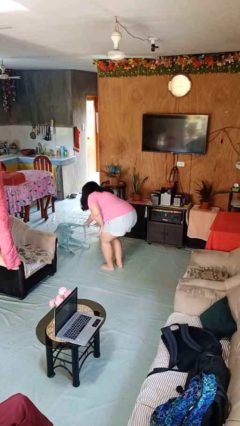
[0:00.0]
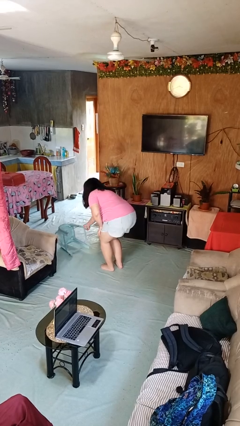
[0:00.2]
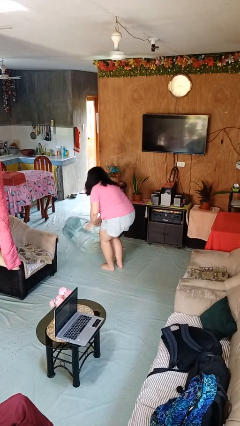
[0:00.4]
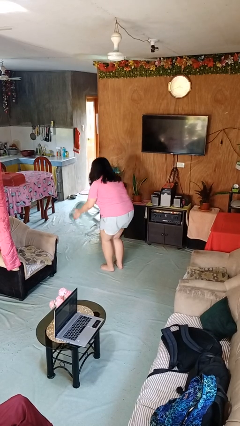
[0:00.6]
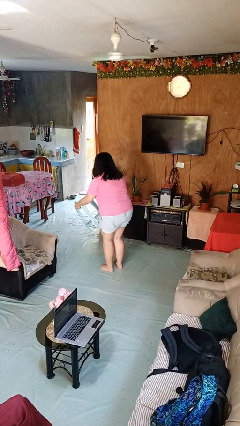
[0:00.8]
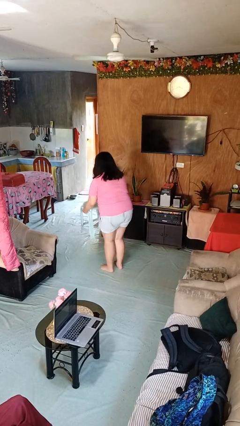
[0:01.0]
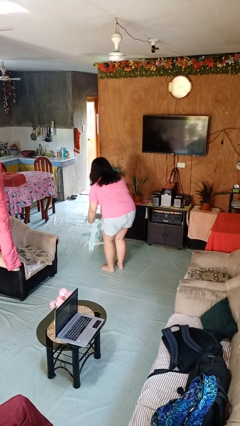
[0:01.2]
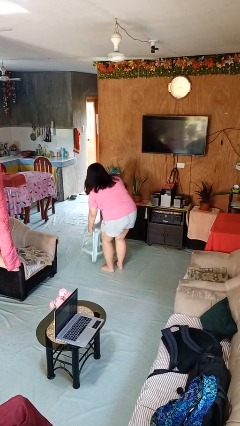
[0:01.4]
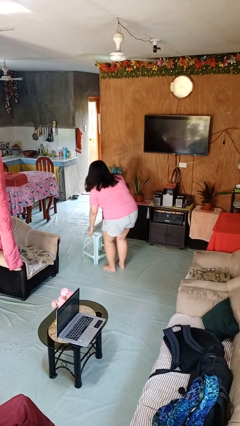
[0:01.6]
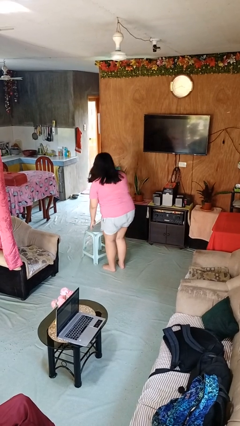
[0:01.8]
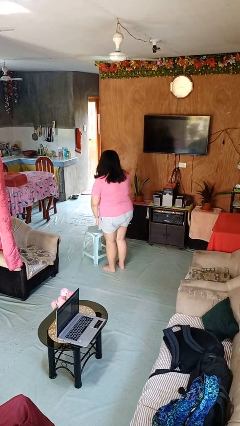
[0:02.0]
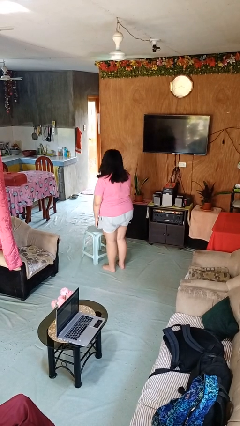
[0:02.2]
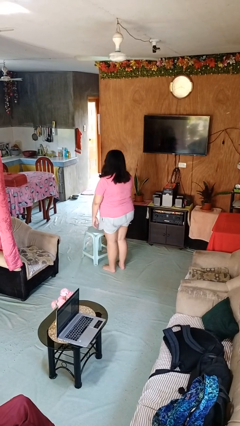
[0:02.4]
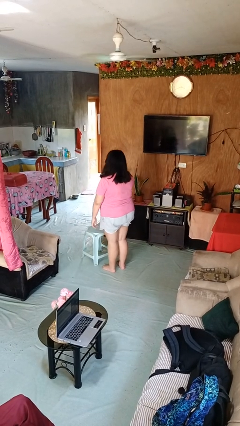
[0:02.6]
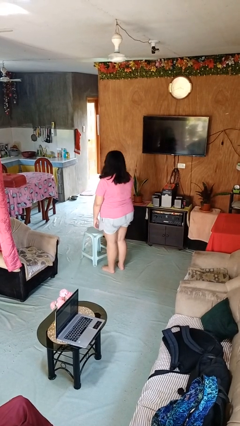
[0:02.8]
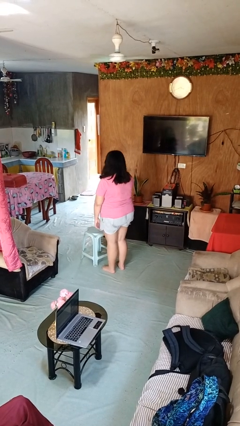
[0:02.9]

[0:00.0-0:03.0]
person sets upright furniture

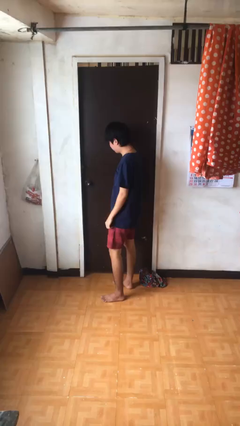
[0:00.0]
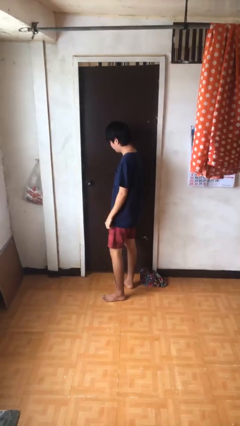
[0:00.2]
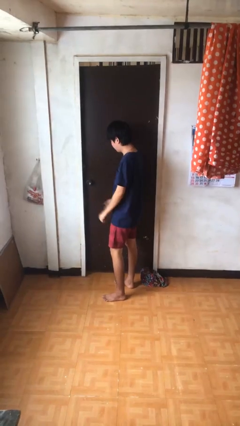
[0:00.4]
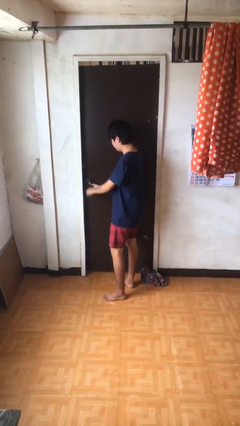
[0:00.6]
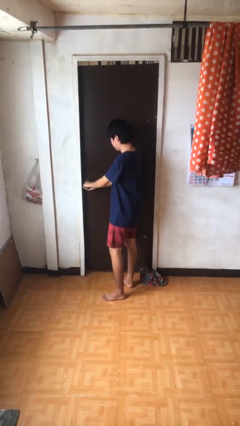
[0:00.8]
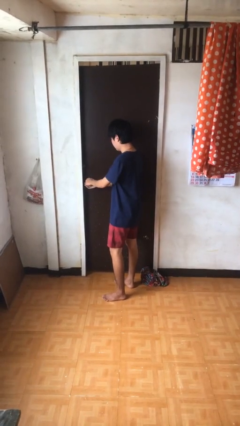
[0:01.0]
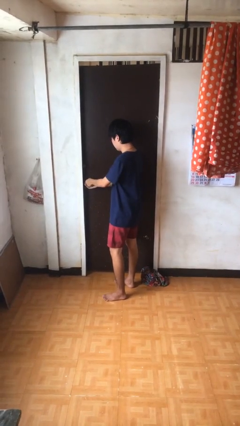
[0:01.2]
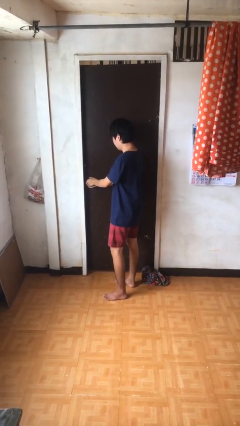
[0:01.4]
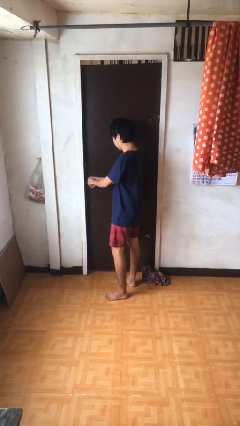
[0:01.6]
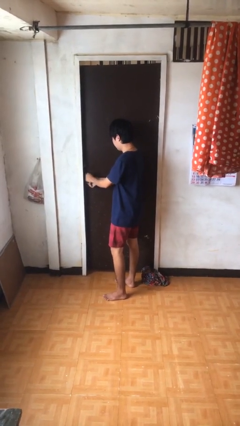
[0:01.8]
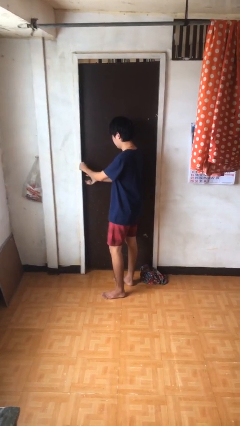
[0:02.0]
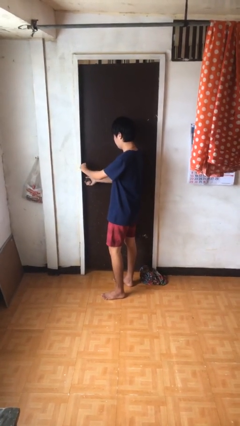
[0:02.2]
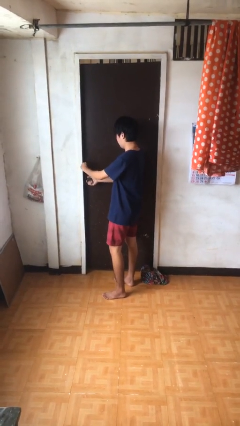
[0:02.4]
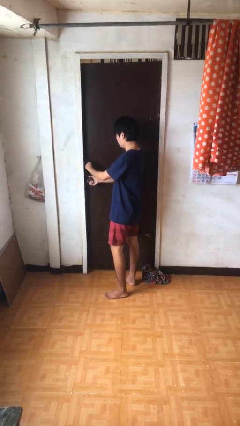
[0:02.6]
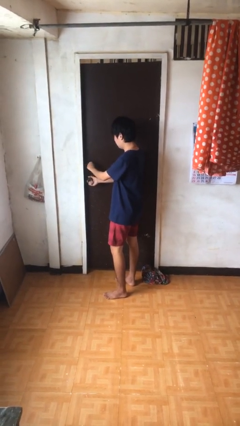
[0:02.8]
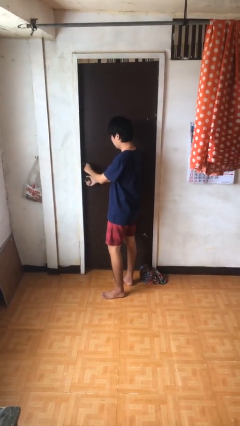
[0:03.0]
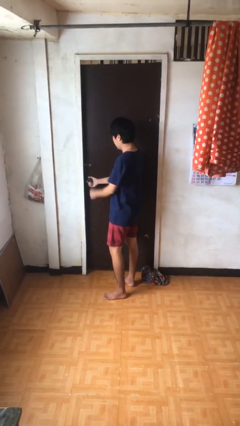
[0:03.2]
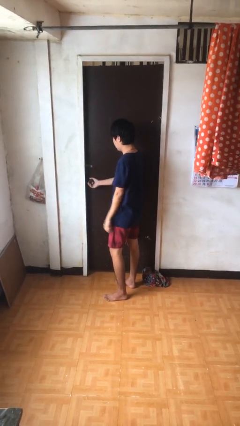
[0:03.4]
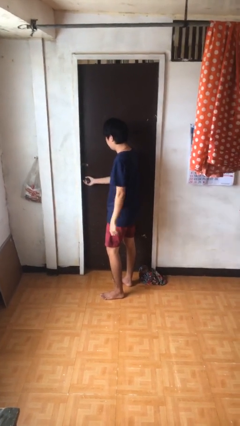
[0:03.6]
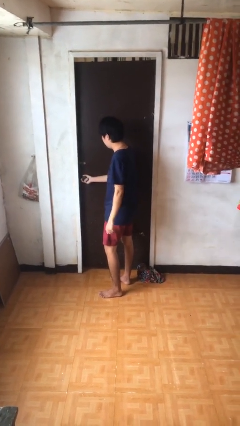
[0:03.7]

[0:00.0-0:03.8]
person unlocks door with keys

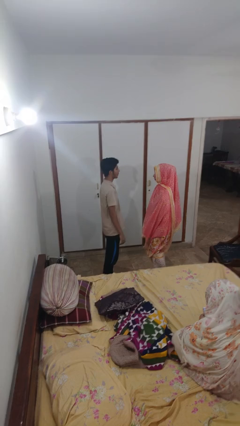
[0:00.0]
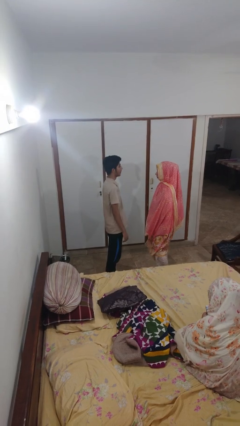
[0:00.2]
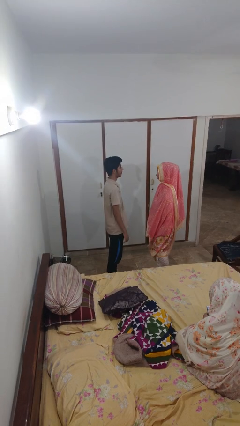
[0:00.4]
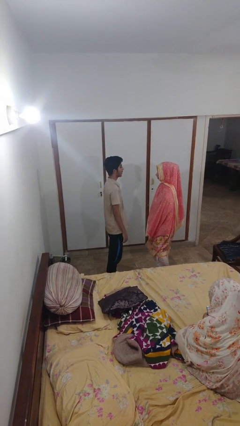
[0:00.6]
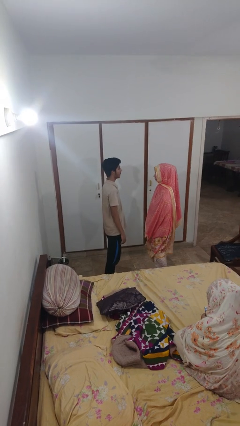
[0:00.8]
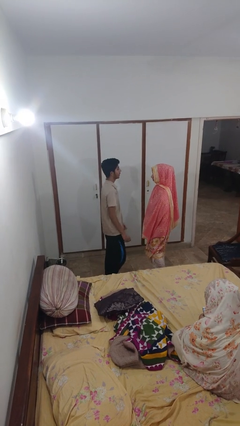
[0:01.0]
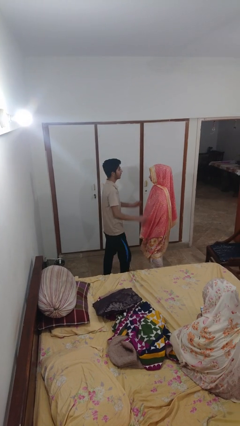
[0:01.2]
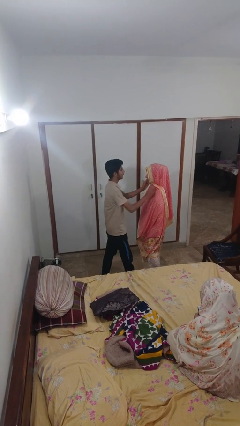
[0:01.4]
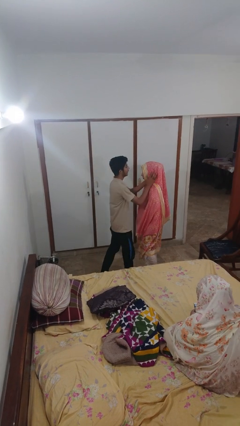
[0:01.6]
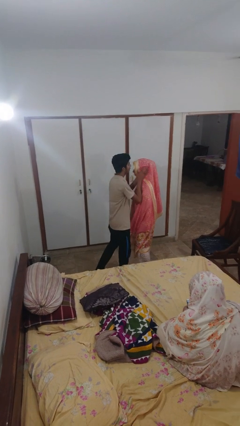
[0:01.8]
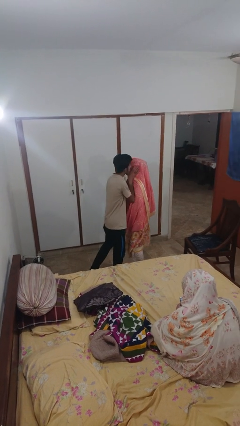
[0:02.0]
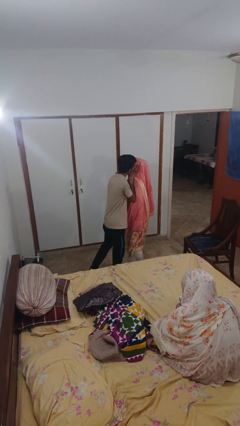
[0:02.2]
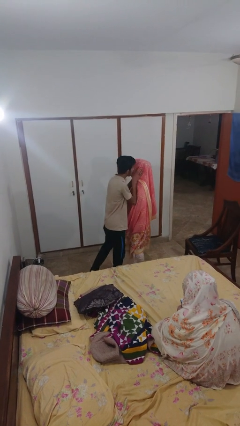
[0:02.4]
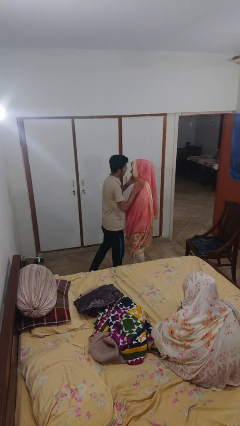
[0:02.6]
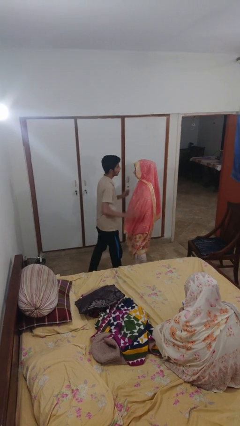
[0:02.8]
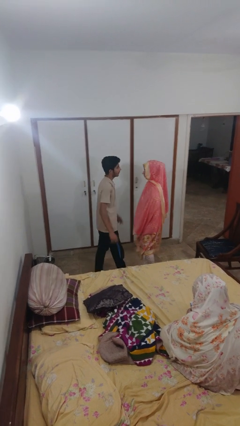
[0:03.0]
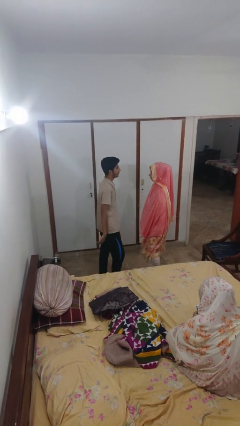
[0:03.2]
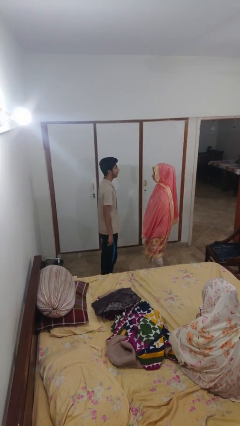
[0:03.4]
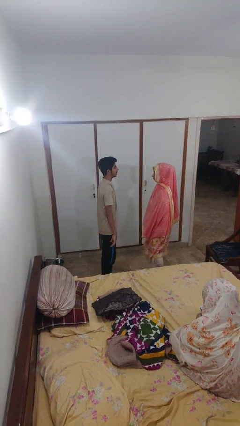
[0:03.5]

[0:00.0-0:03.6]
person kisses cheek of person

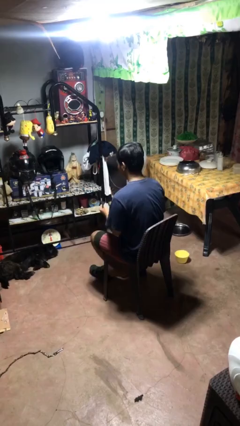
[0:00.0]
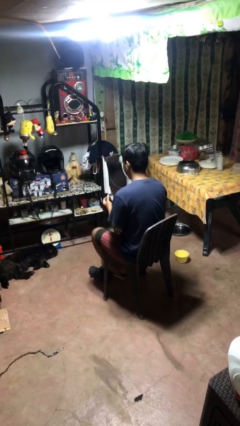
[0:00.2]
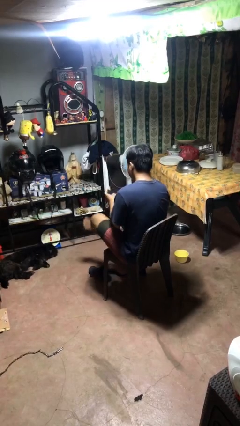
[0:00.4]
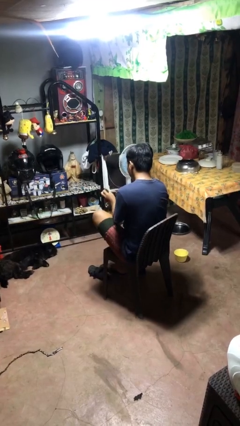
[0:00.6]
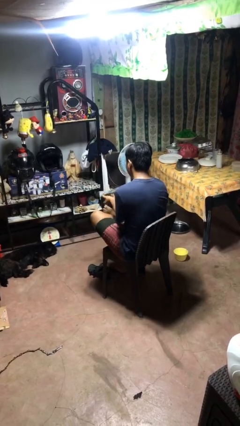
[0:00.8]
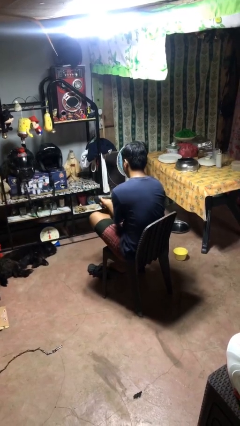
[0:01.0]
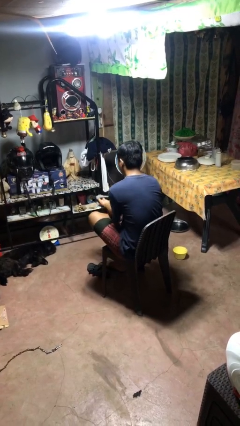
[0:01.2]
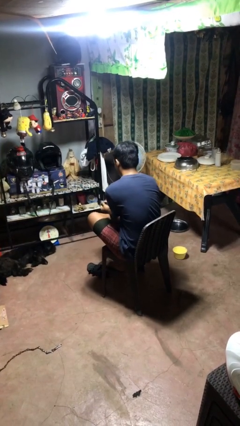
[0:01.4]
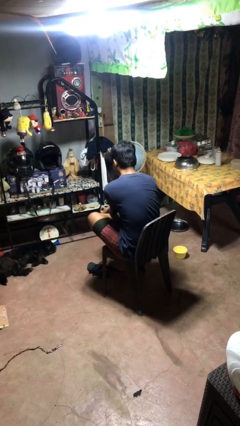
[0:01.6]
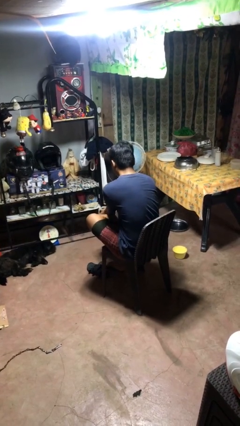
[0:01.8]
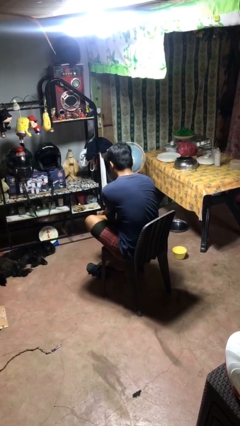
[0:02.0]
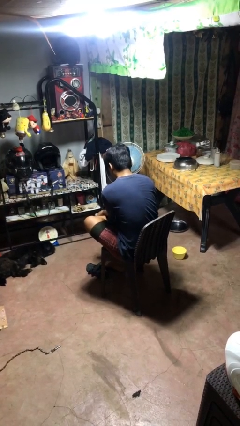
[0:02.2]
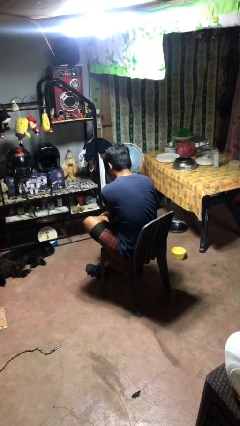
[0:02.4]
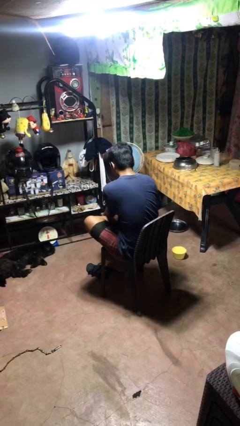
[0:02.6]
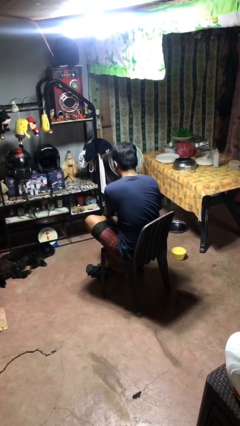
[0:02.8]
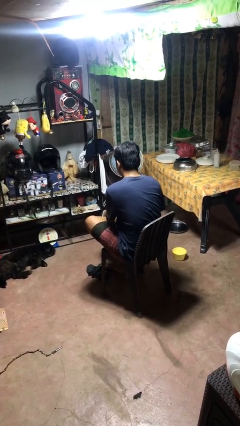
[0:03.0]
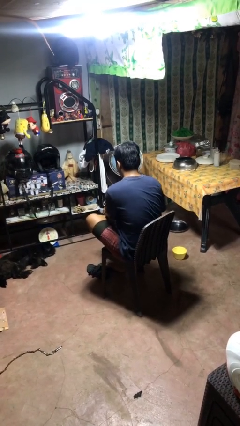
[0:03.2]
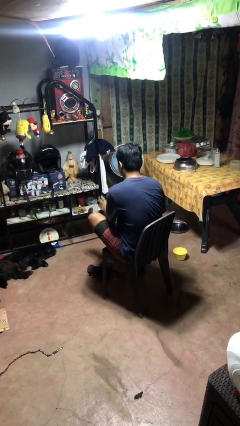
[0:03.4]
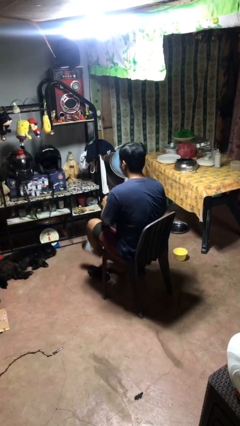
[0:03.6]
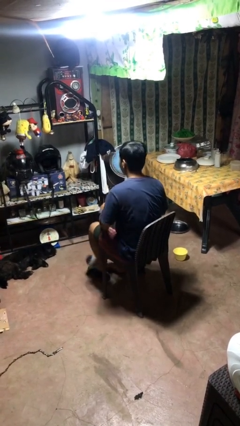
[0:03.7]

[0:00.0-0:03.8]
person puts on socks

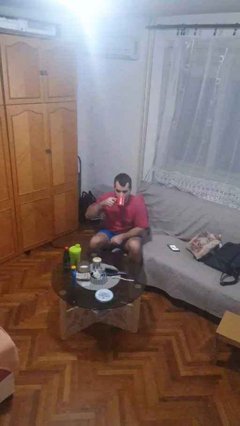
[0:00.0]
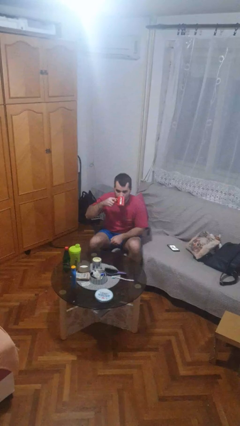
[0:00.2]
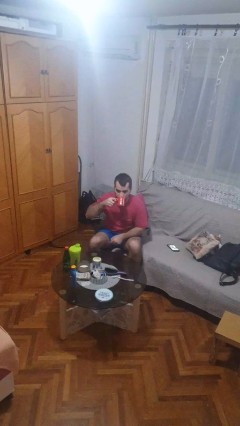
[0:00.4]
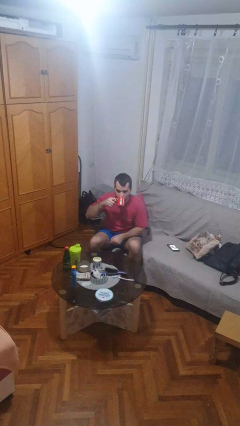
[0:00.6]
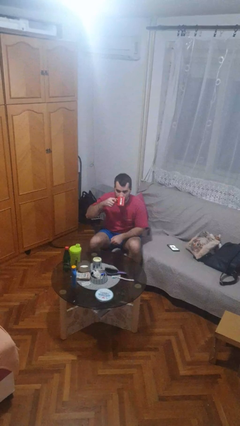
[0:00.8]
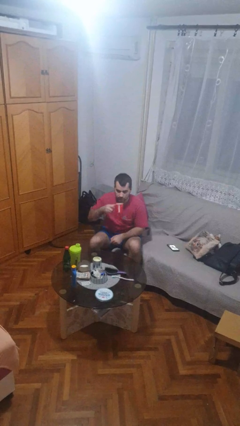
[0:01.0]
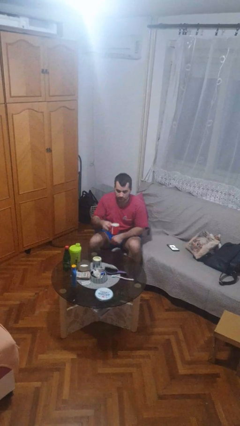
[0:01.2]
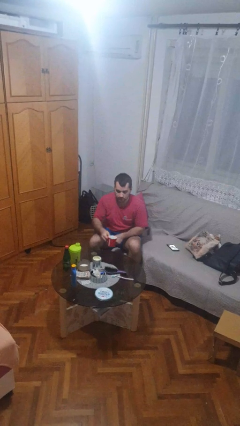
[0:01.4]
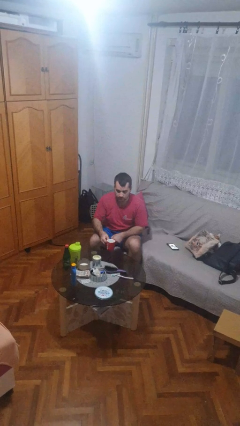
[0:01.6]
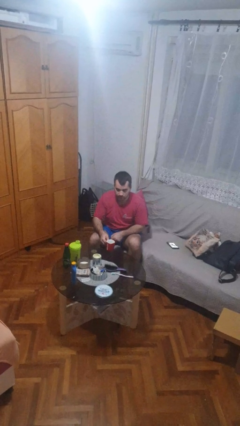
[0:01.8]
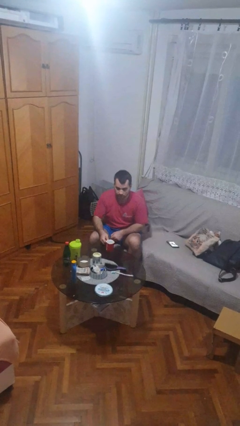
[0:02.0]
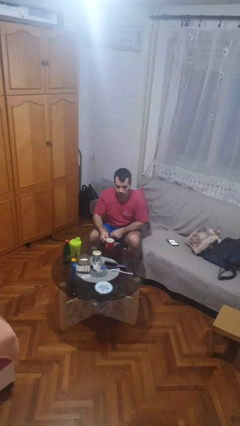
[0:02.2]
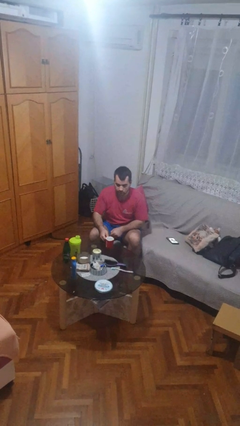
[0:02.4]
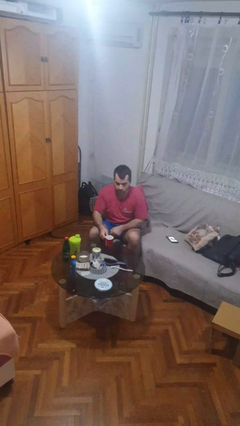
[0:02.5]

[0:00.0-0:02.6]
person puts down object on table

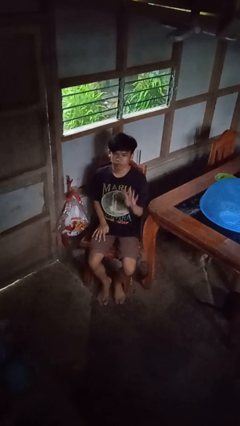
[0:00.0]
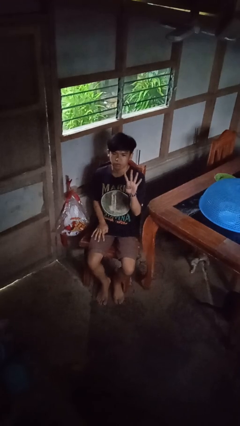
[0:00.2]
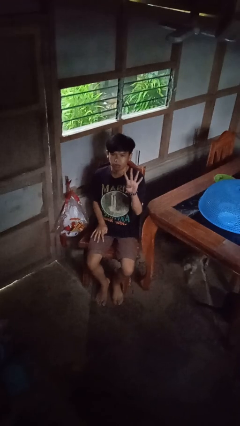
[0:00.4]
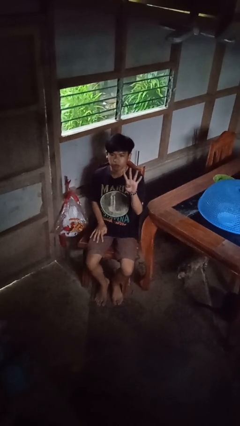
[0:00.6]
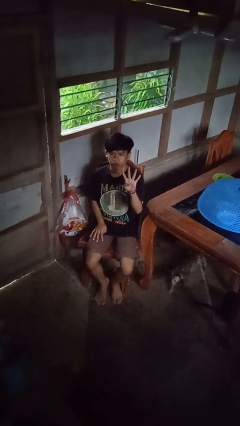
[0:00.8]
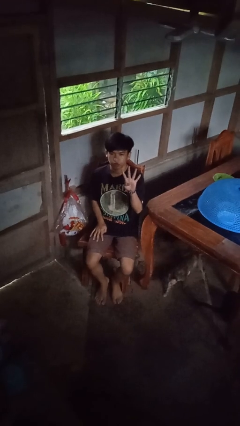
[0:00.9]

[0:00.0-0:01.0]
person gestures number four
